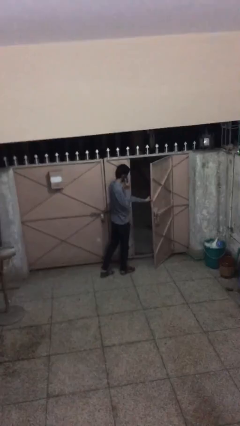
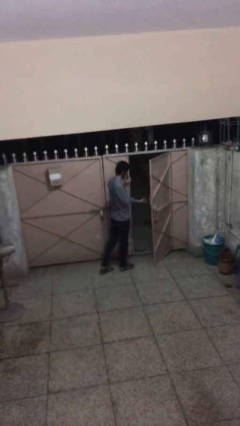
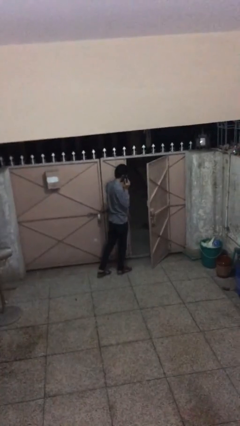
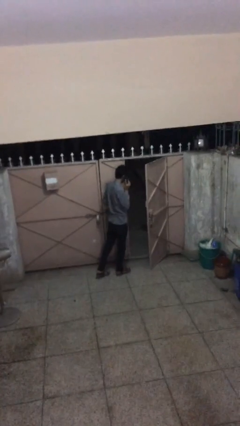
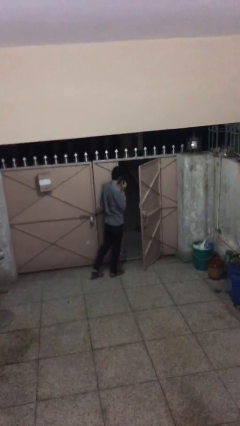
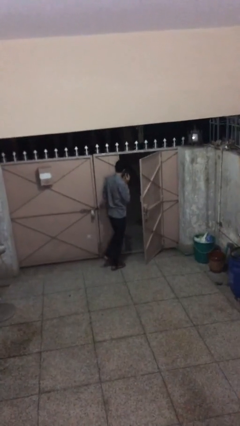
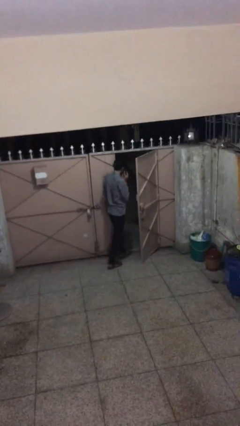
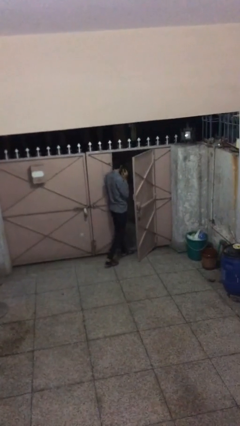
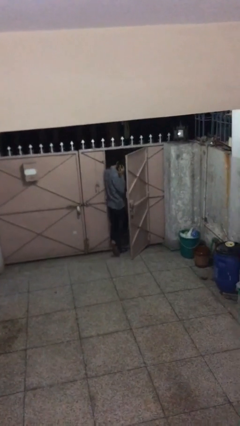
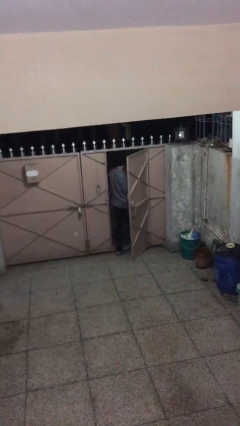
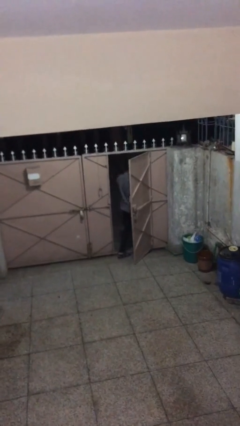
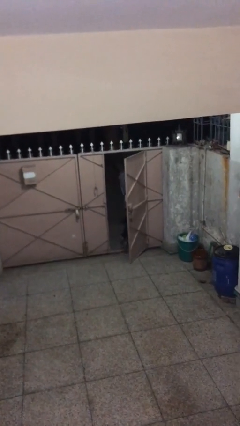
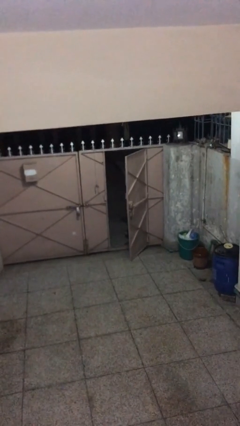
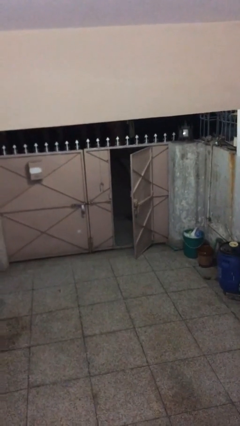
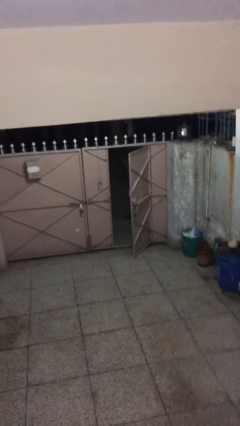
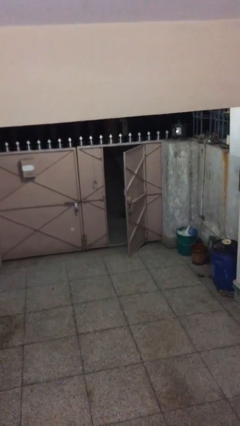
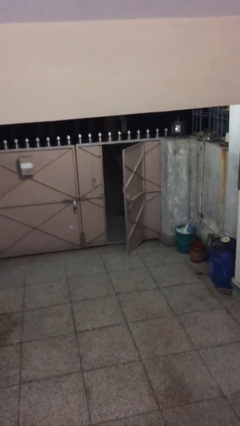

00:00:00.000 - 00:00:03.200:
person exits scene through structure

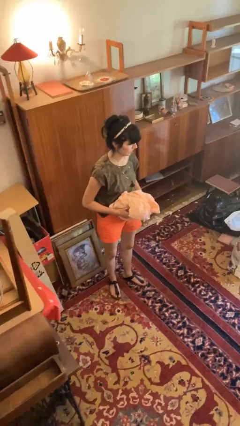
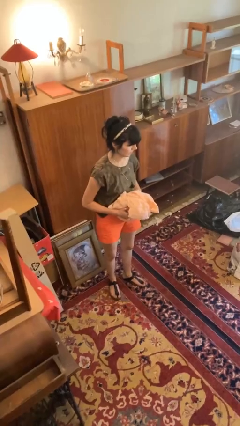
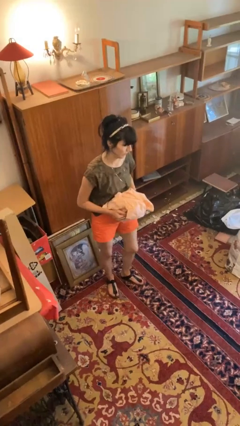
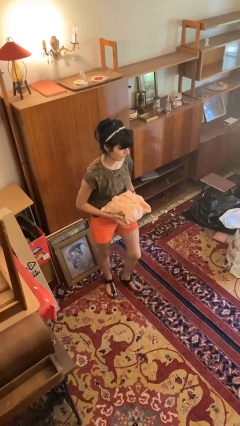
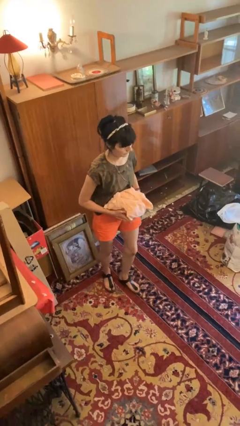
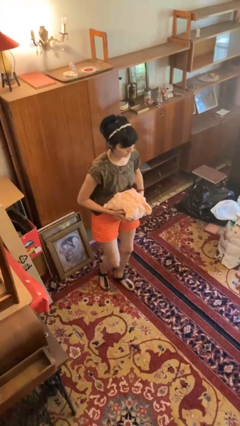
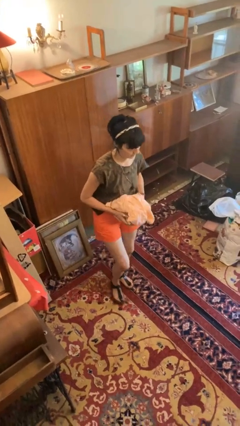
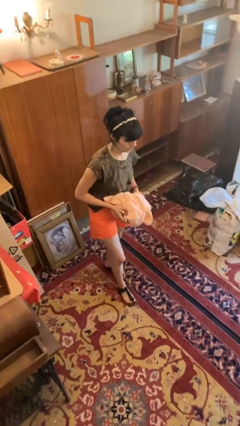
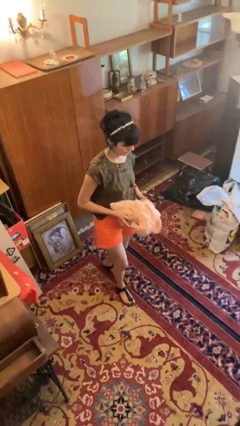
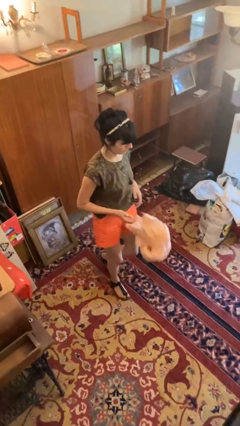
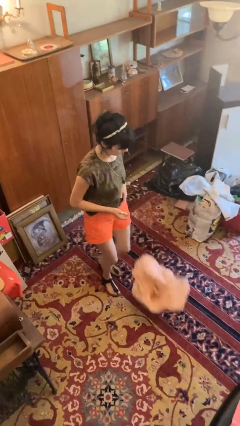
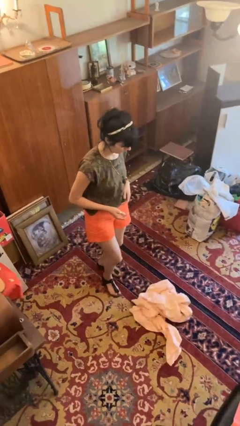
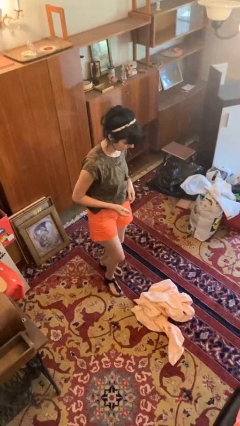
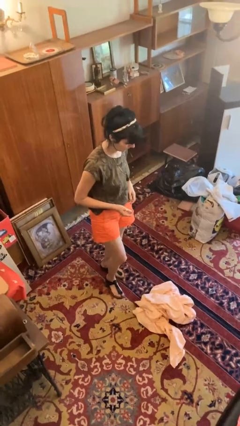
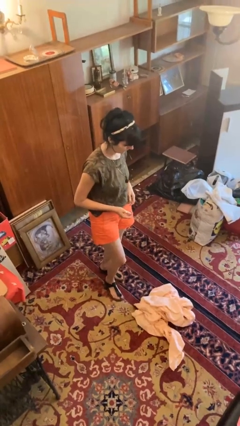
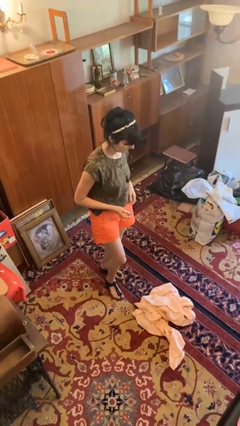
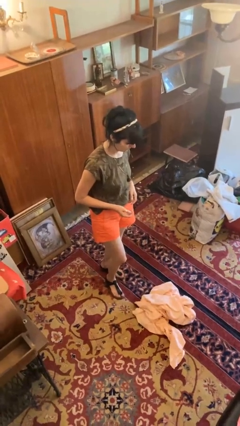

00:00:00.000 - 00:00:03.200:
person drops object

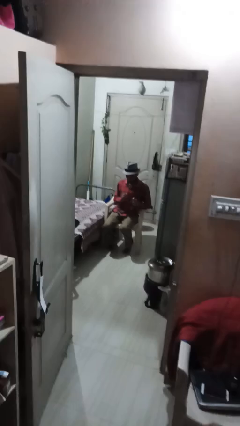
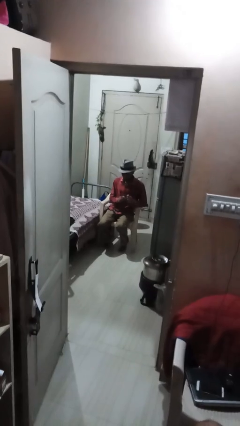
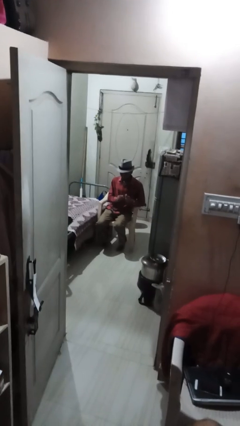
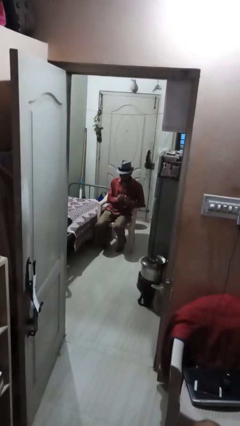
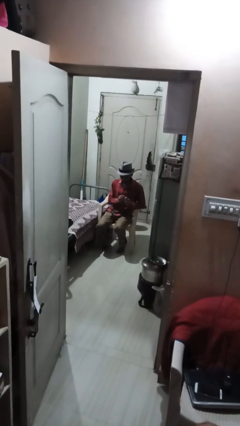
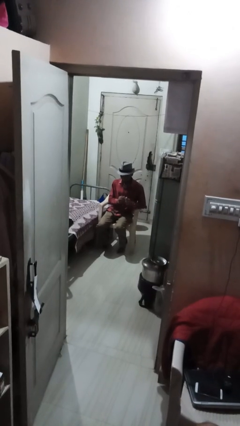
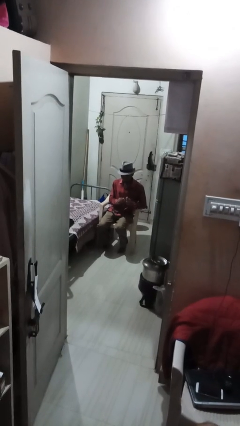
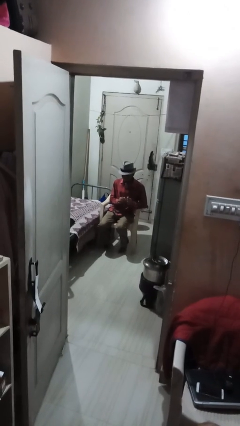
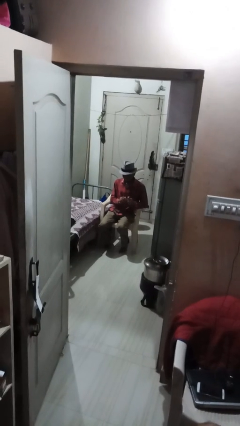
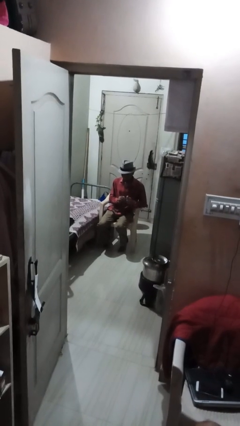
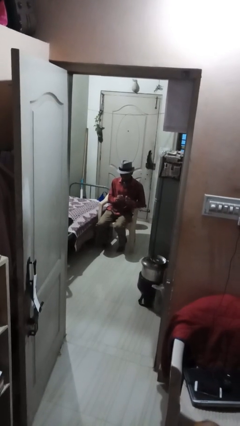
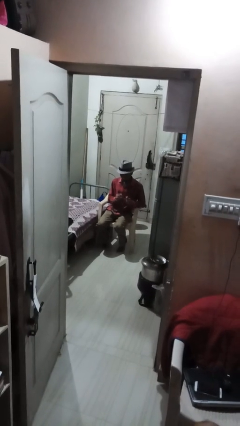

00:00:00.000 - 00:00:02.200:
person files fingernails

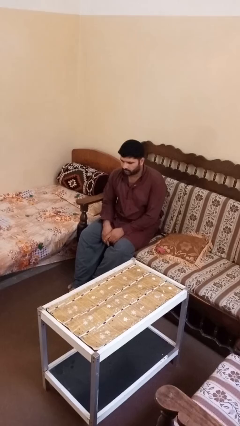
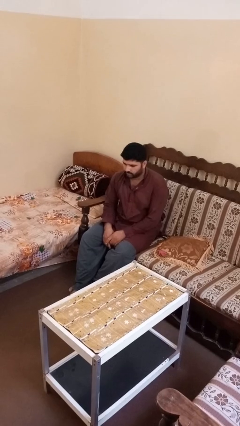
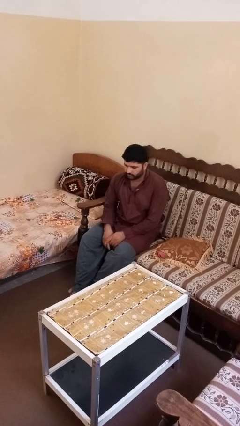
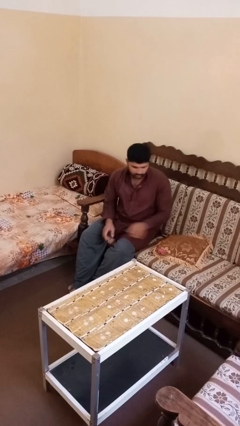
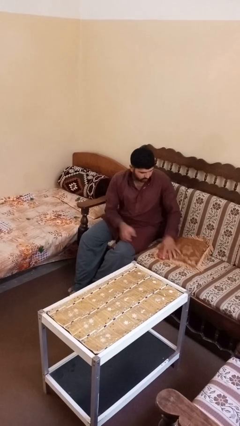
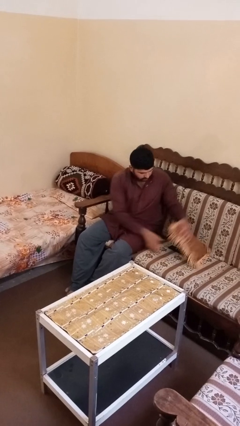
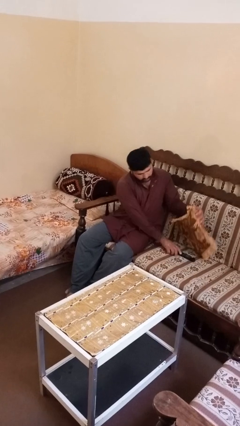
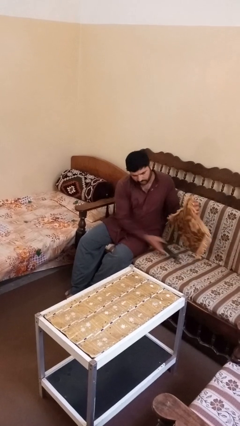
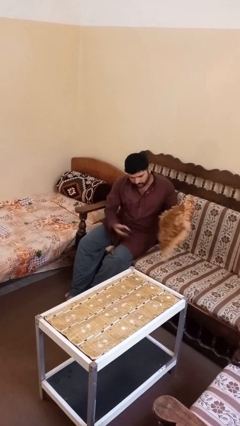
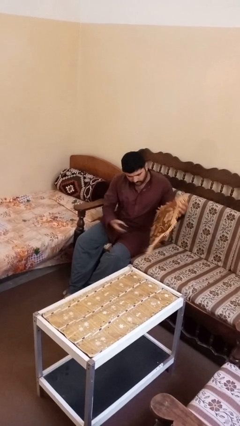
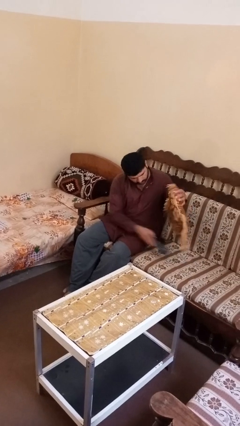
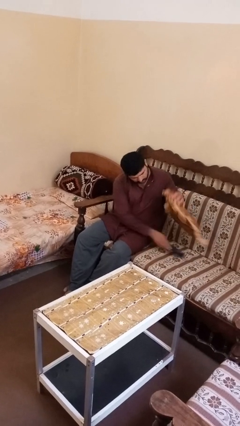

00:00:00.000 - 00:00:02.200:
person searches in couch

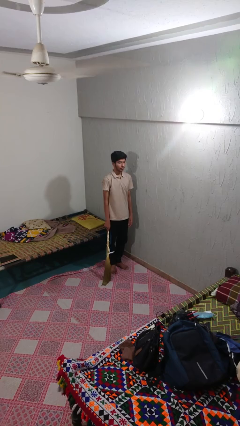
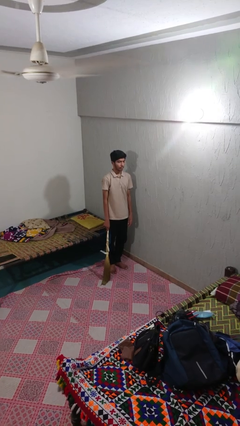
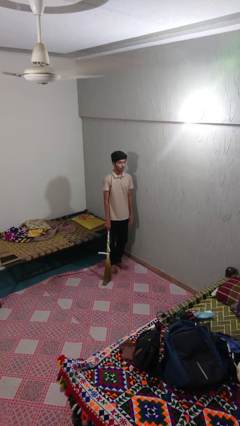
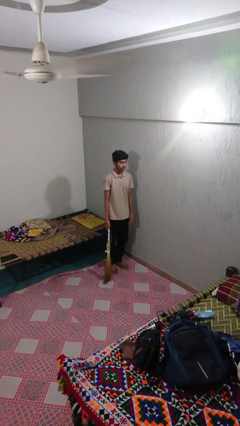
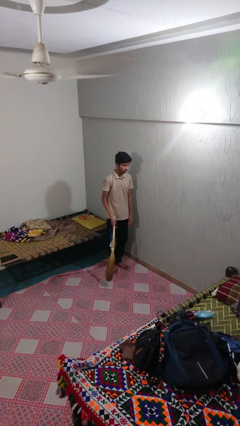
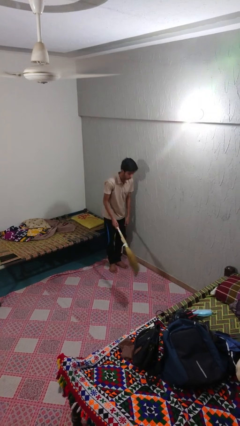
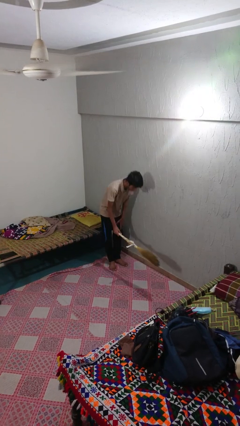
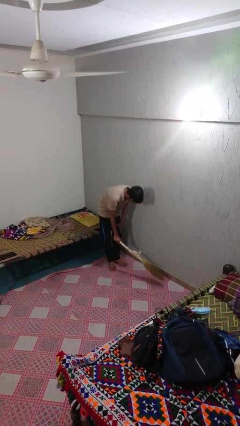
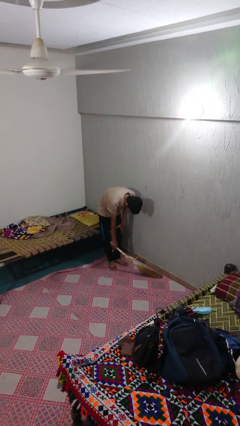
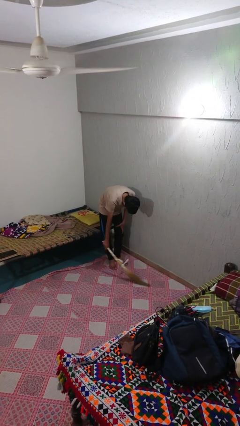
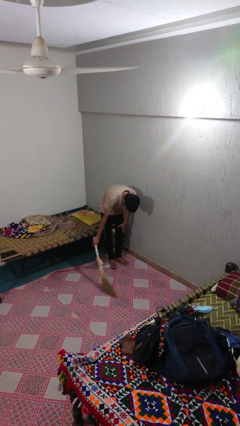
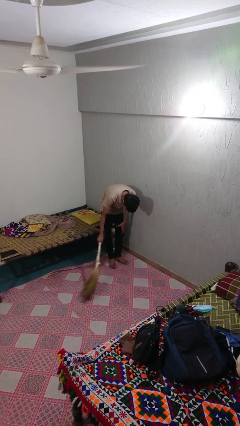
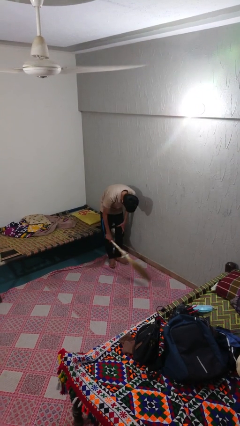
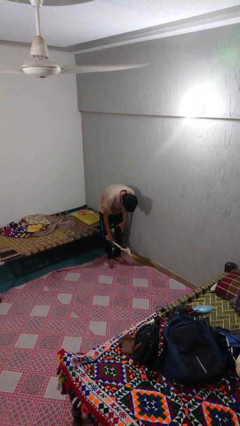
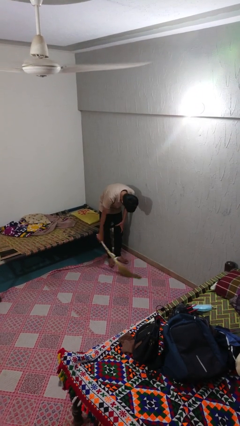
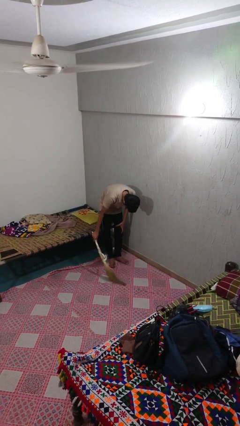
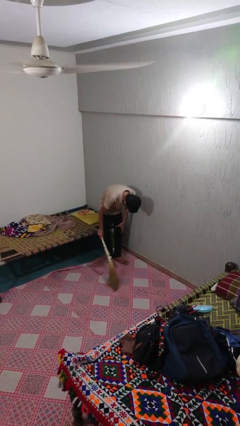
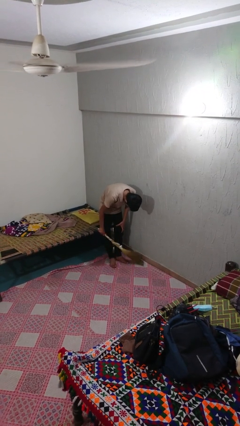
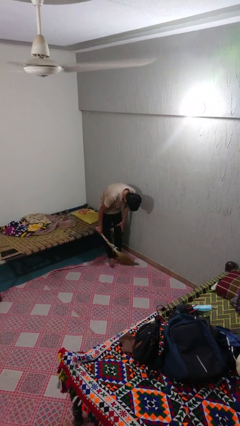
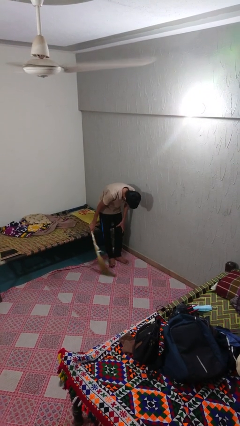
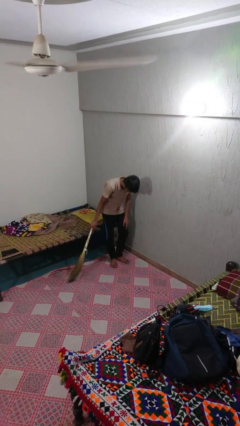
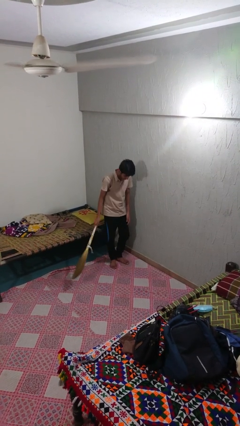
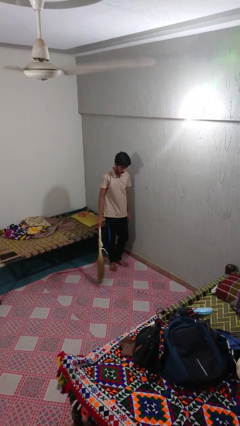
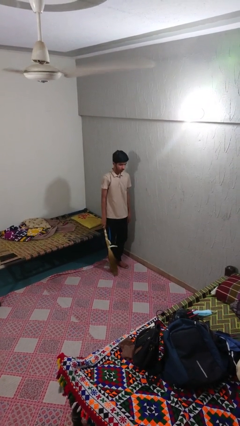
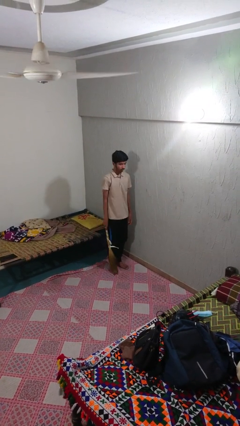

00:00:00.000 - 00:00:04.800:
person sweeps floor

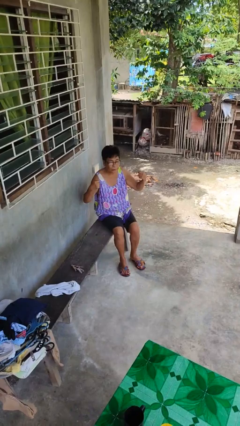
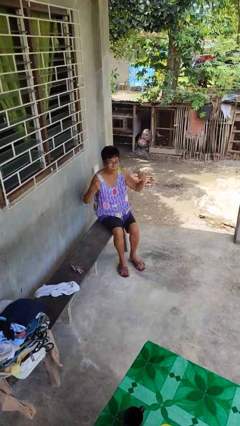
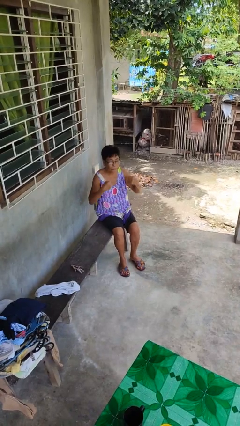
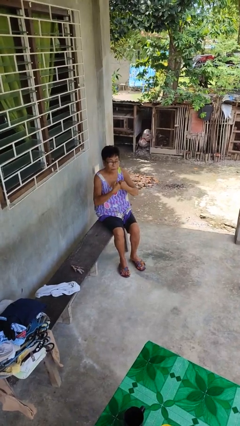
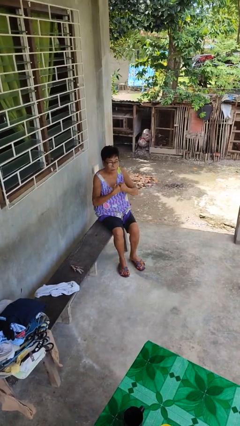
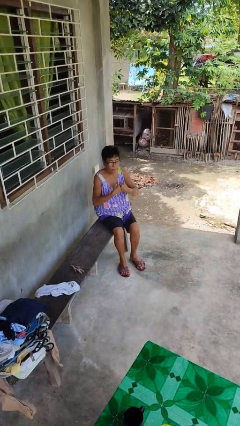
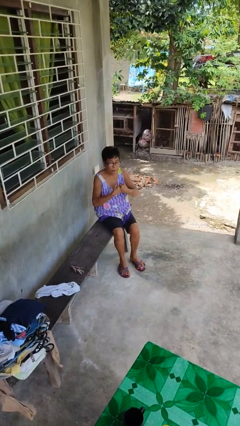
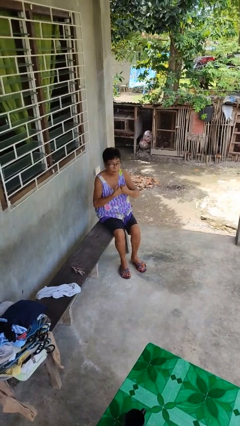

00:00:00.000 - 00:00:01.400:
person gestures zoom out

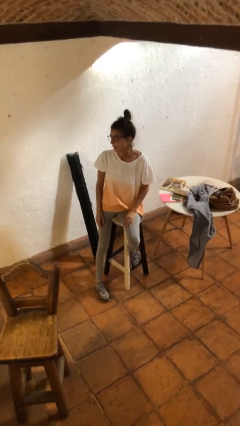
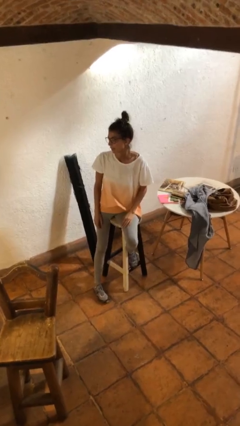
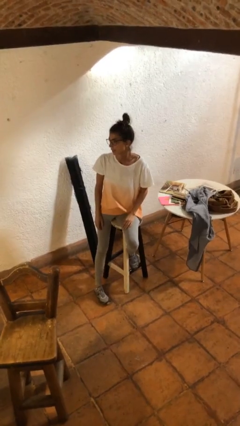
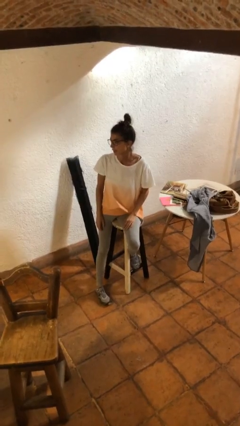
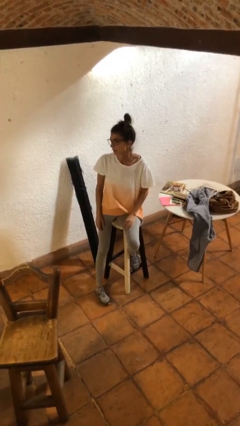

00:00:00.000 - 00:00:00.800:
person gestures lower hand
